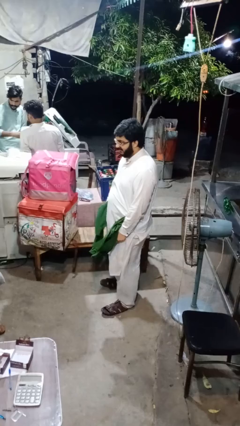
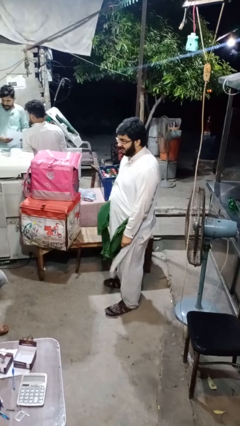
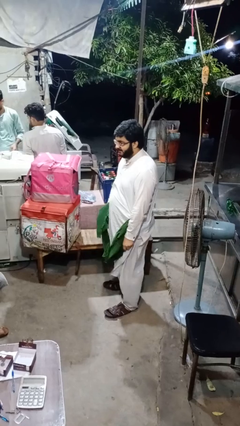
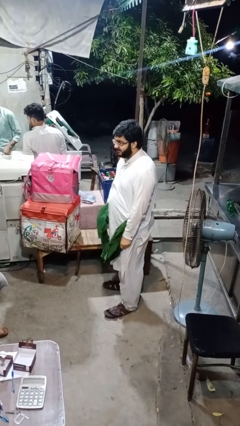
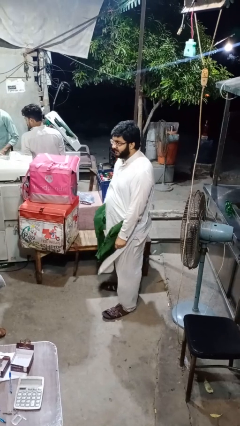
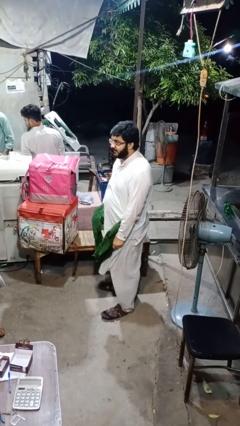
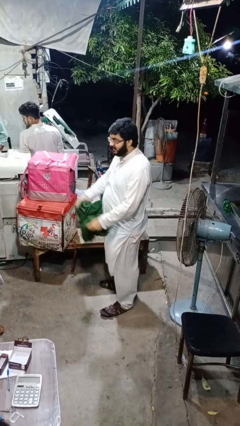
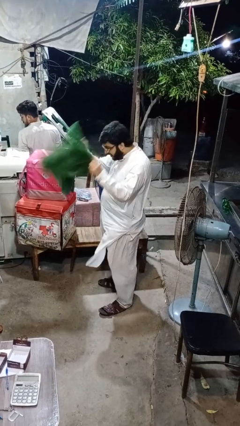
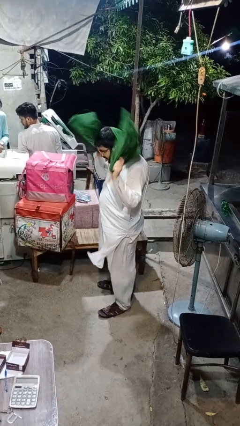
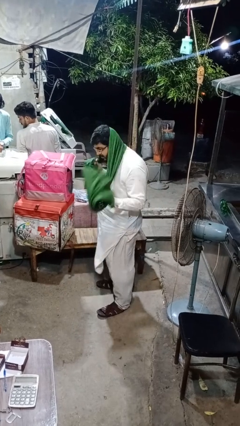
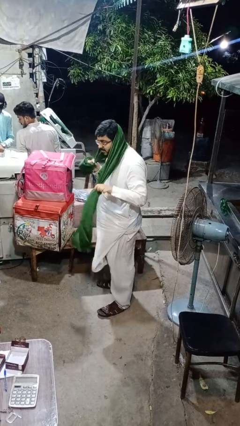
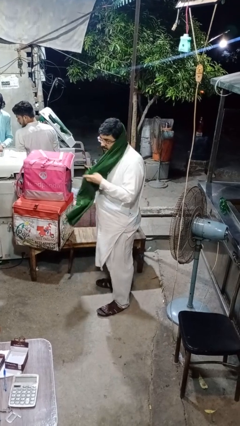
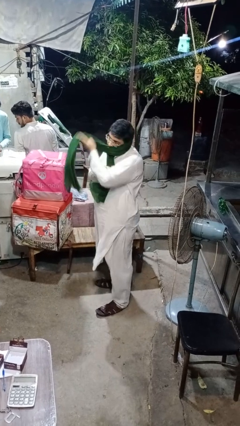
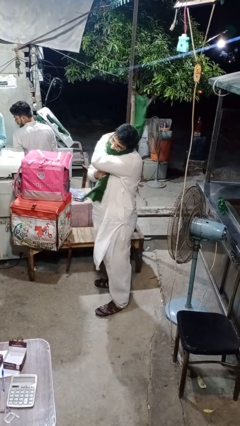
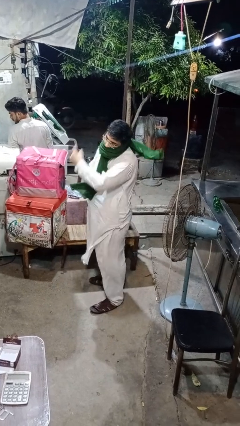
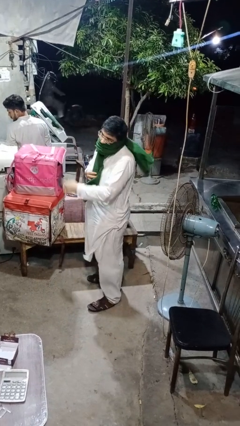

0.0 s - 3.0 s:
person puts on scarf

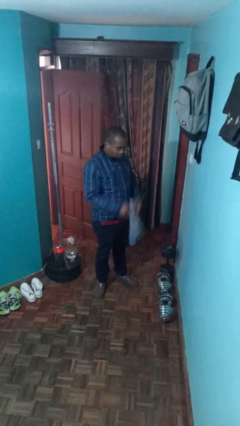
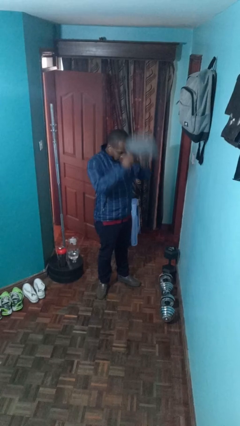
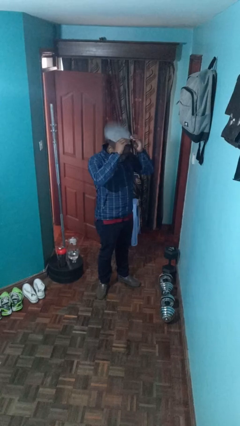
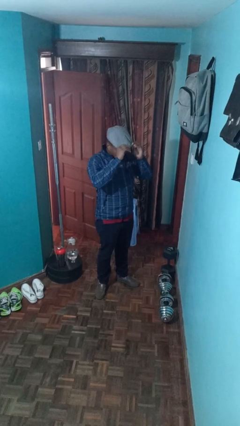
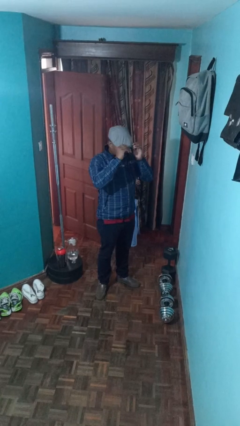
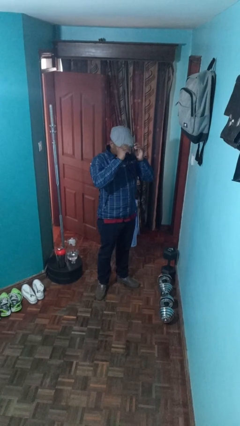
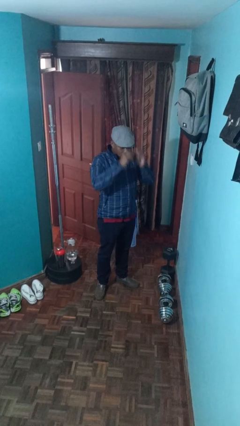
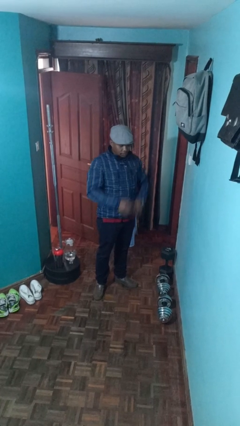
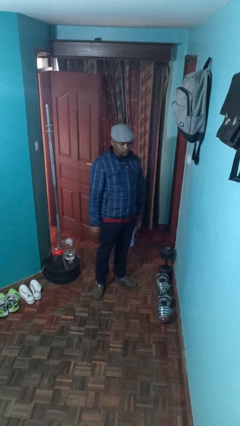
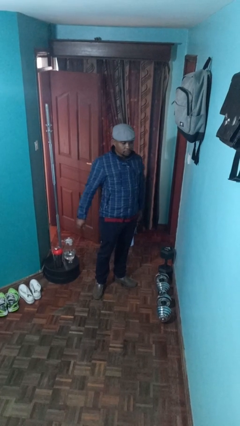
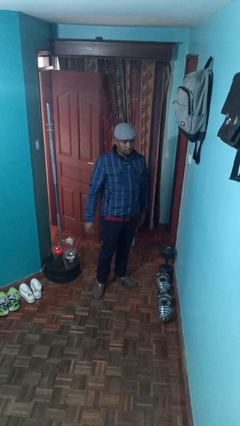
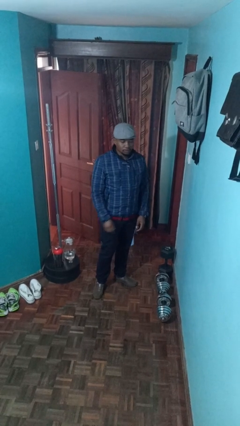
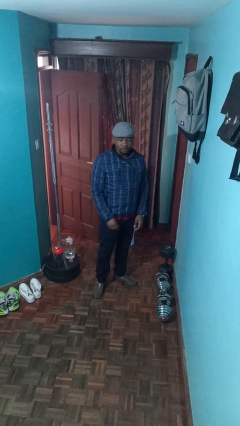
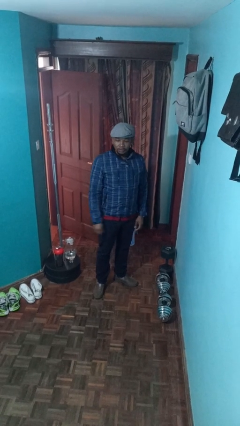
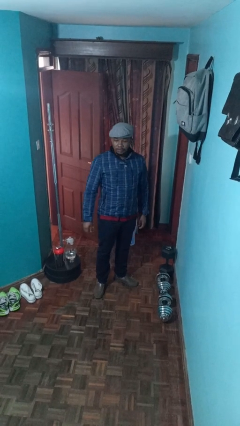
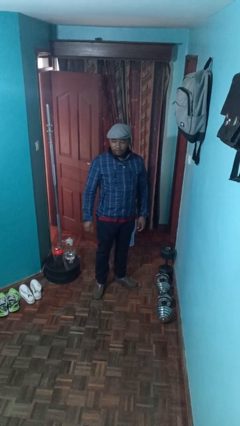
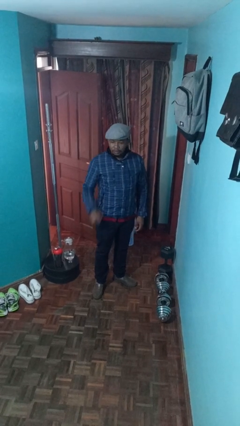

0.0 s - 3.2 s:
person puts on hat

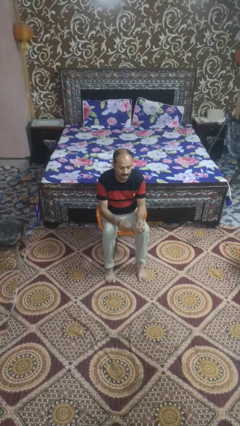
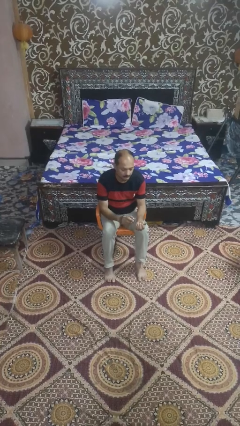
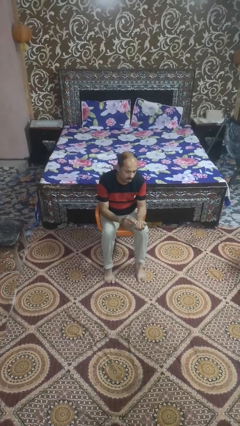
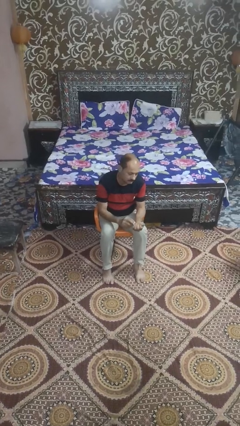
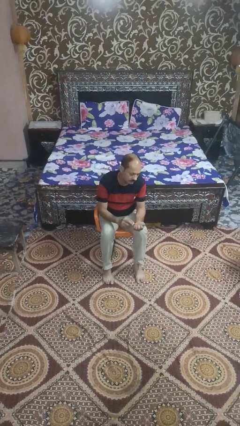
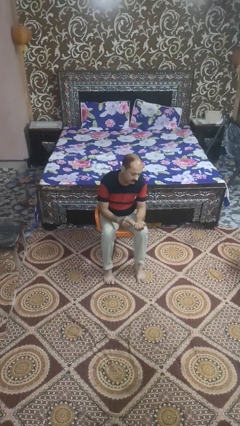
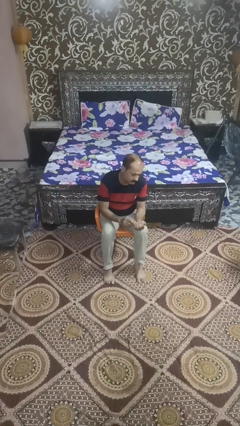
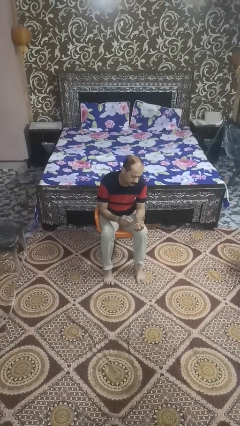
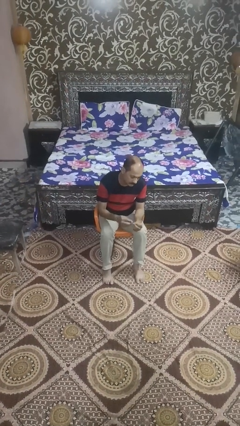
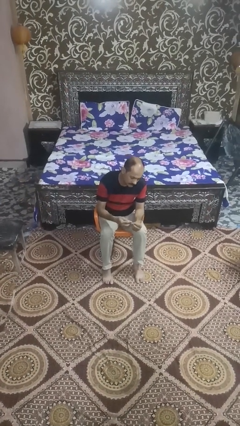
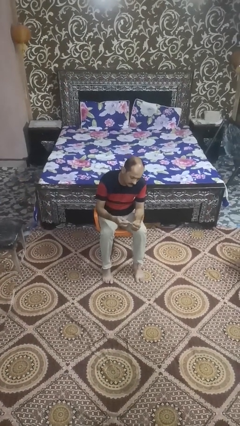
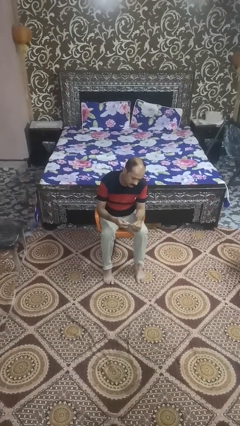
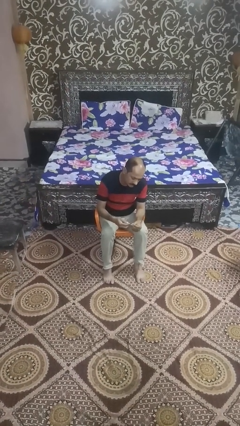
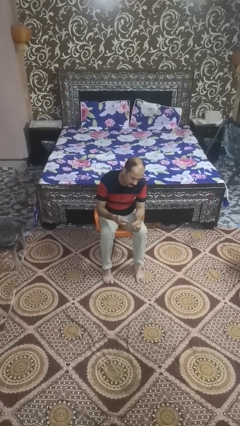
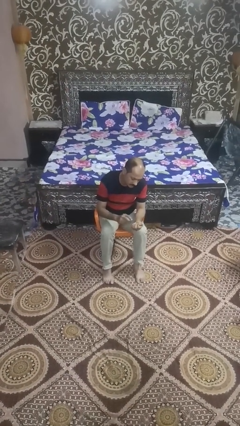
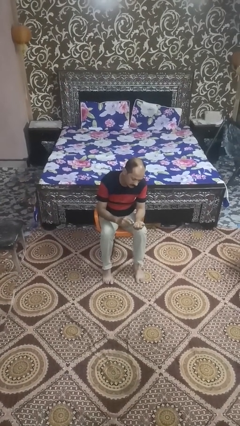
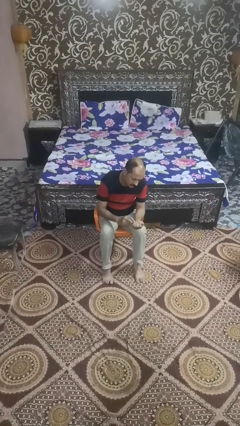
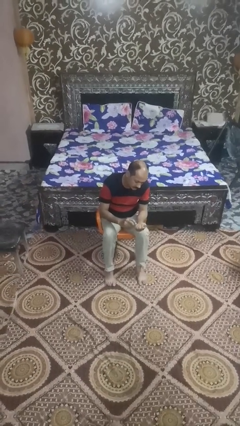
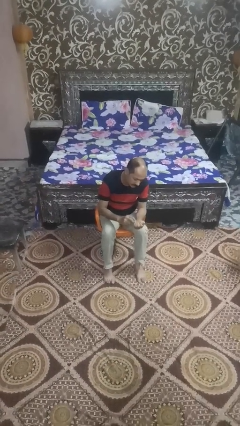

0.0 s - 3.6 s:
person files fingernails

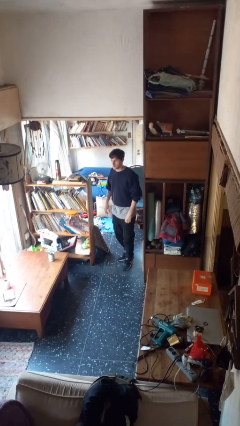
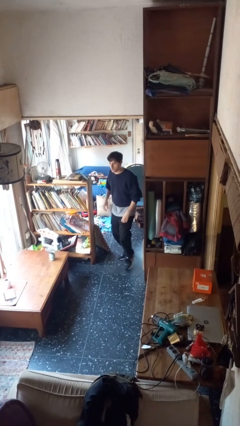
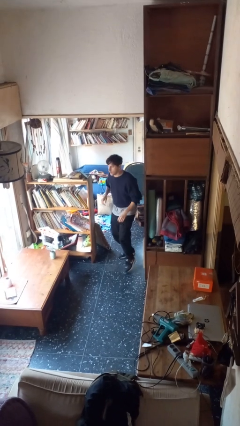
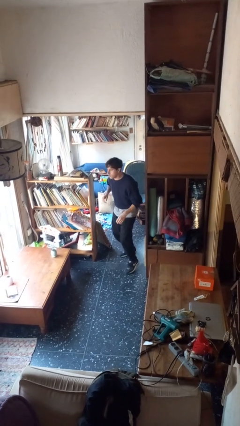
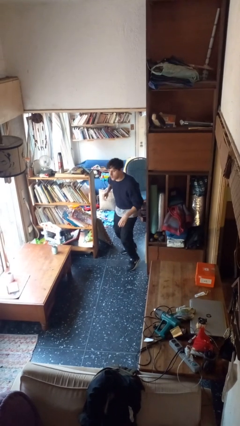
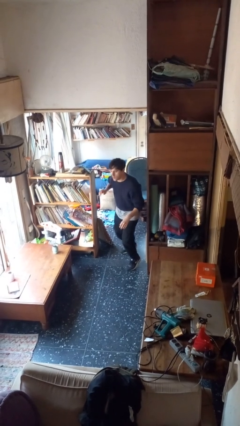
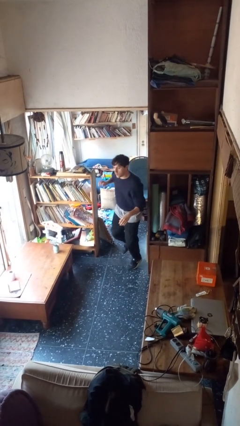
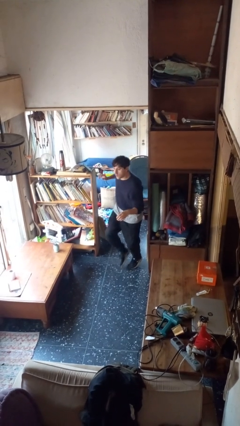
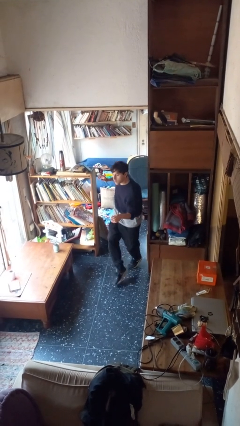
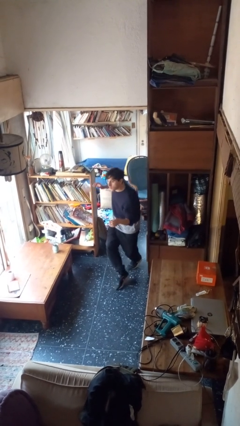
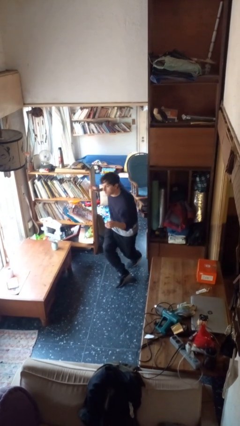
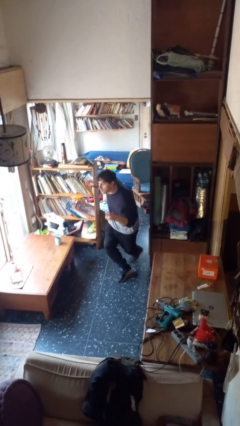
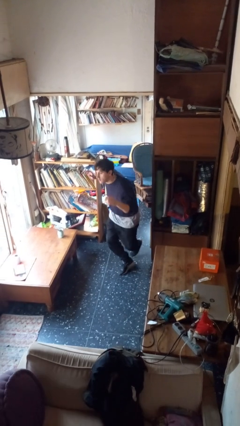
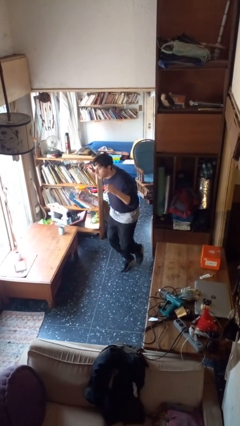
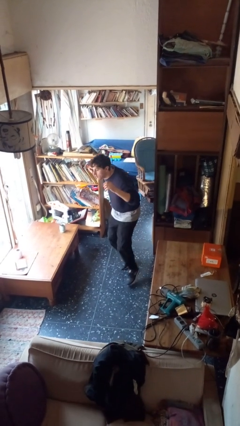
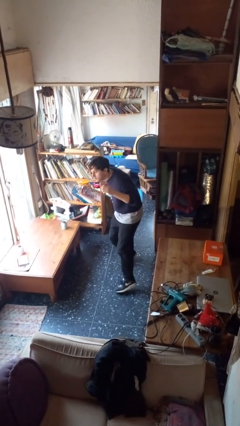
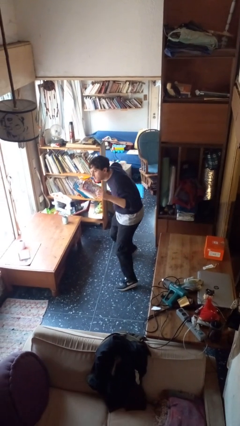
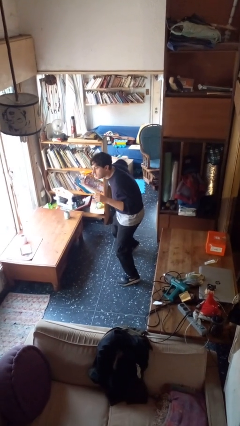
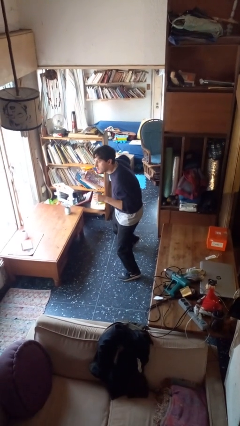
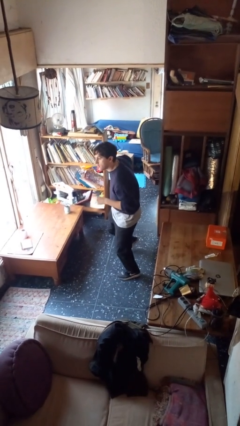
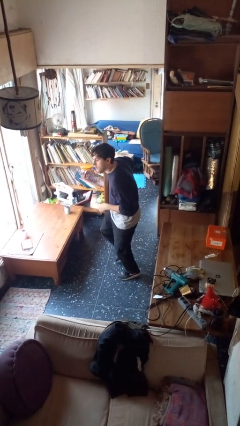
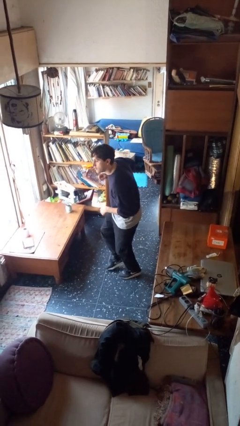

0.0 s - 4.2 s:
person walks tiptoe

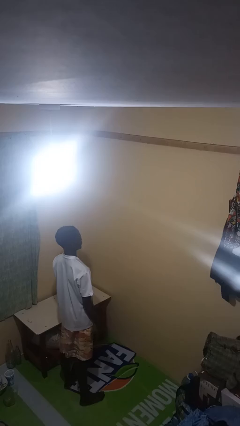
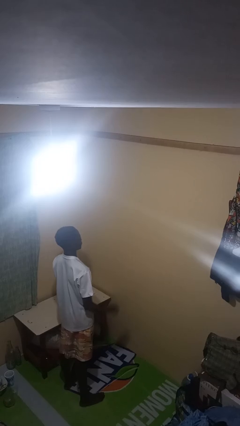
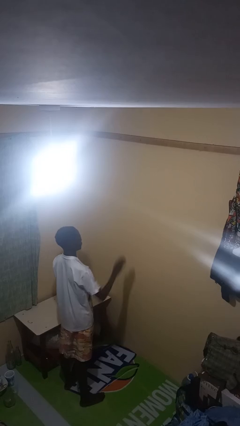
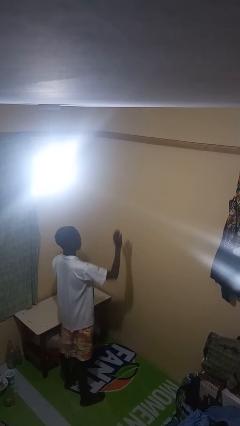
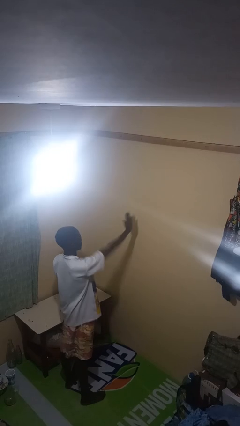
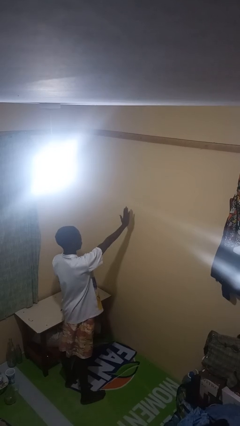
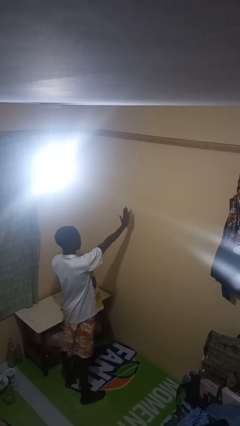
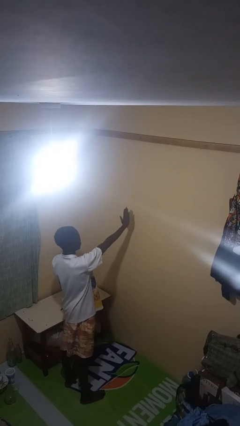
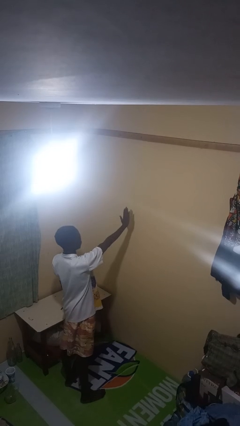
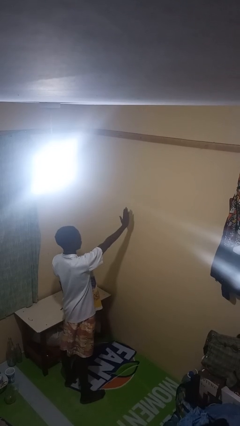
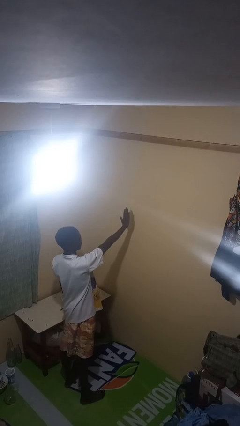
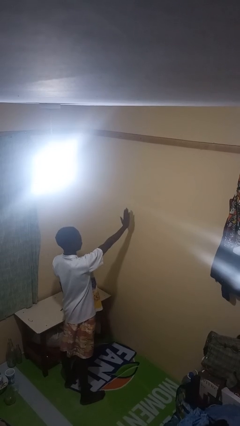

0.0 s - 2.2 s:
person gestures stop

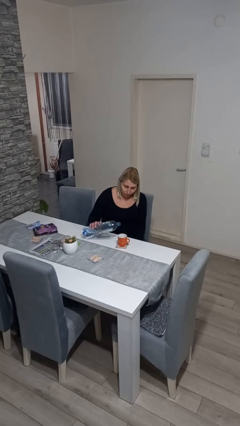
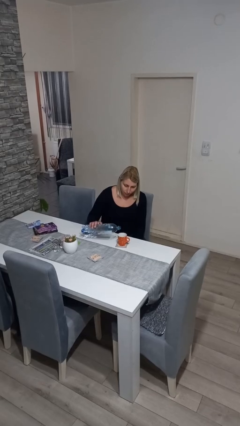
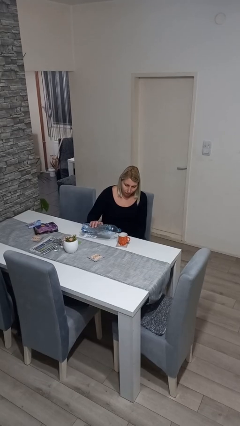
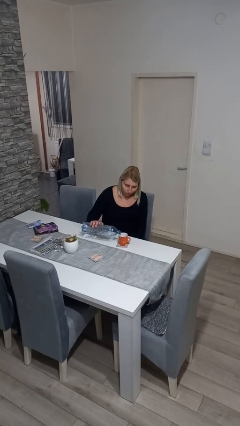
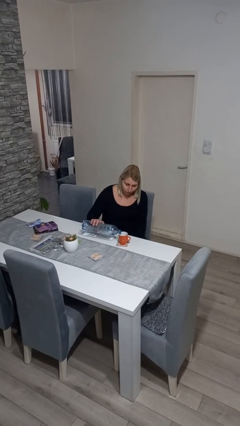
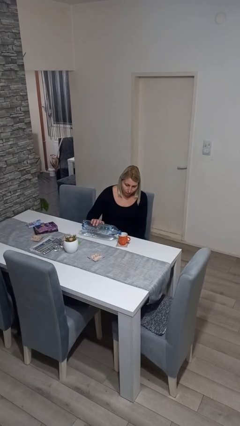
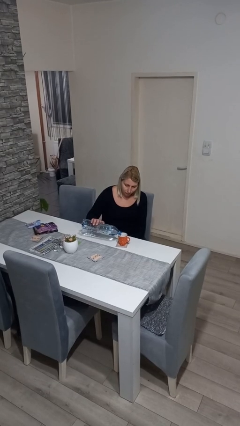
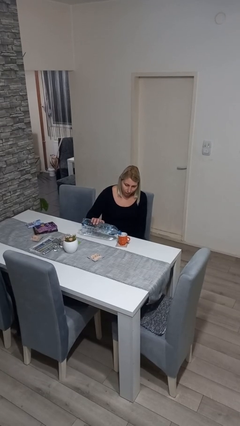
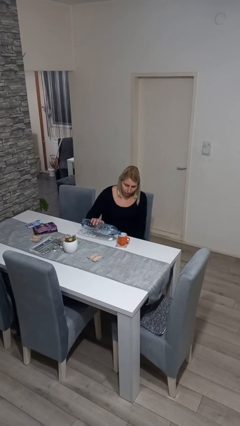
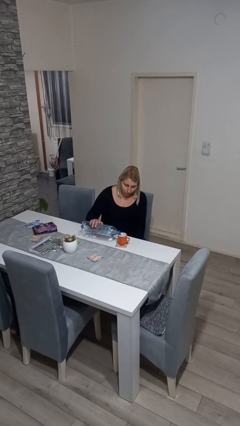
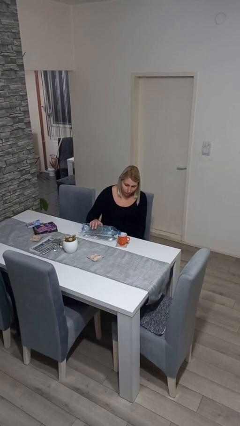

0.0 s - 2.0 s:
person pours liquid into cup
